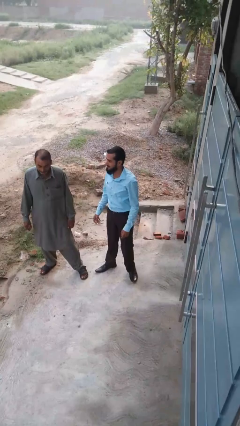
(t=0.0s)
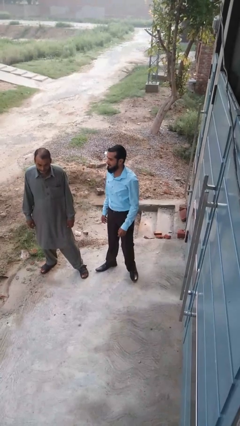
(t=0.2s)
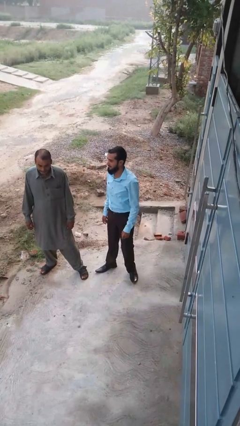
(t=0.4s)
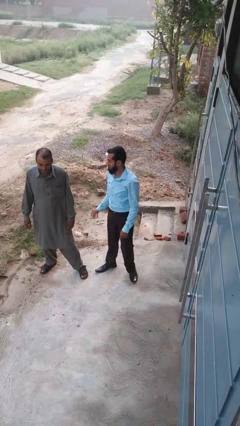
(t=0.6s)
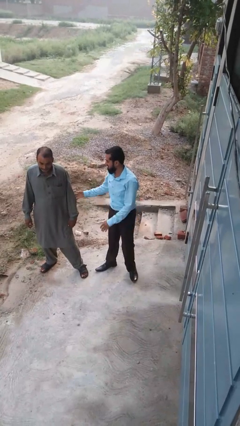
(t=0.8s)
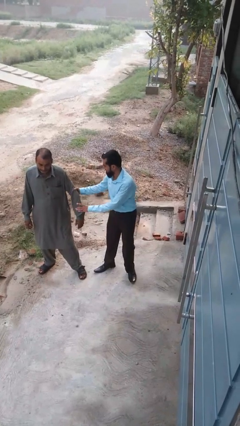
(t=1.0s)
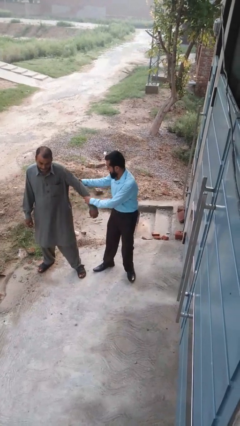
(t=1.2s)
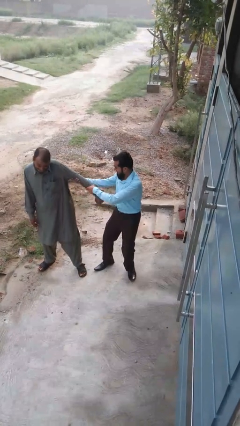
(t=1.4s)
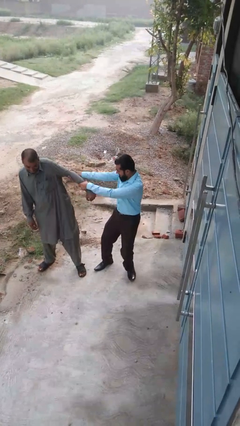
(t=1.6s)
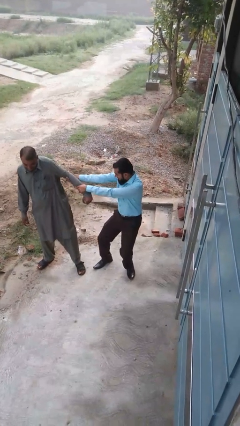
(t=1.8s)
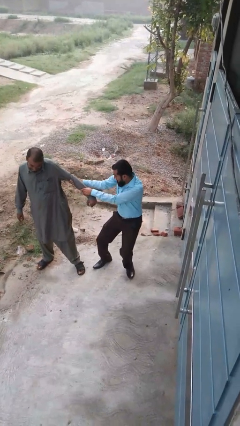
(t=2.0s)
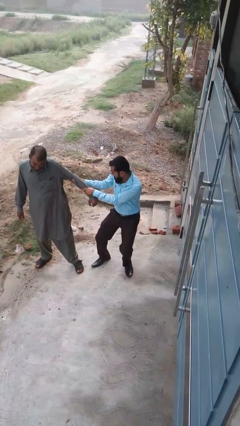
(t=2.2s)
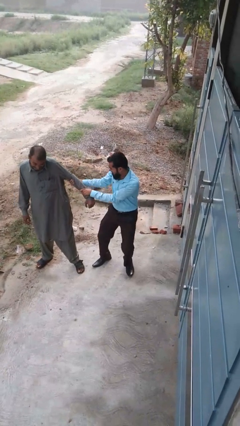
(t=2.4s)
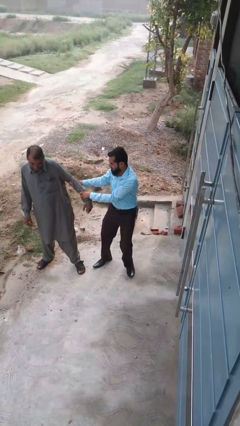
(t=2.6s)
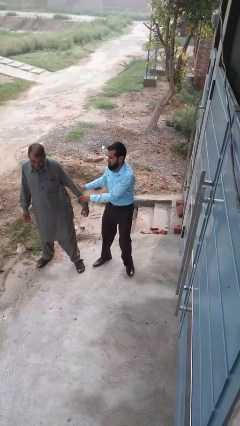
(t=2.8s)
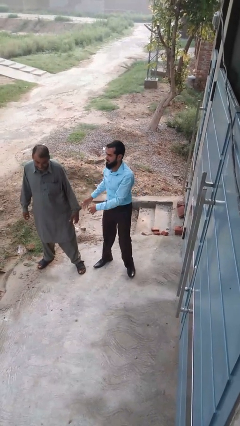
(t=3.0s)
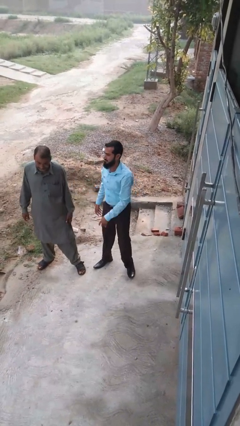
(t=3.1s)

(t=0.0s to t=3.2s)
person grabs person by forearm

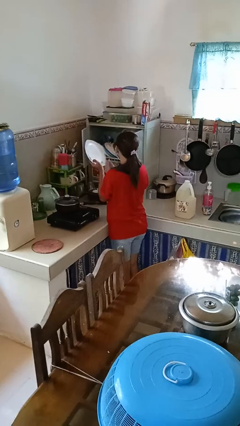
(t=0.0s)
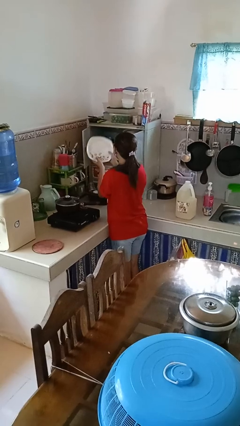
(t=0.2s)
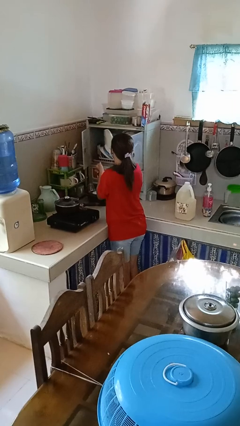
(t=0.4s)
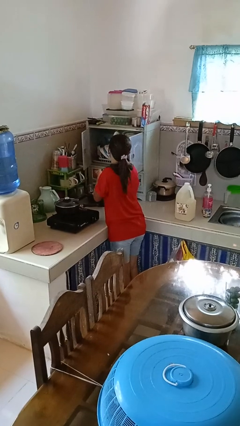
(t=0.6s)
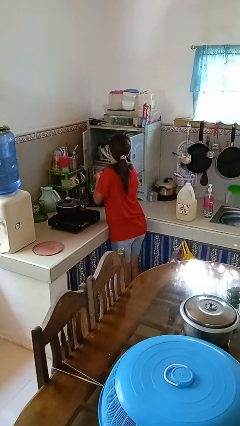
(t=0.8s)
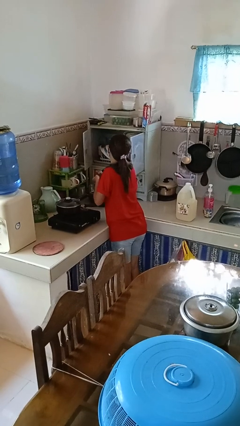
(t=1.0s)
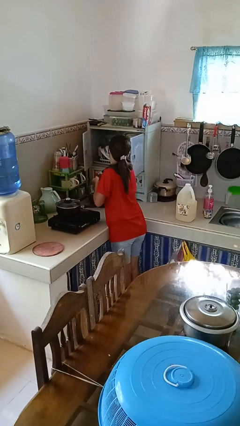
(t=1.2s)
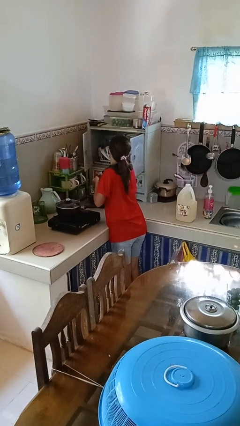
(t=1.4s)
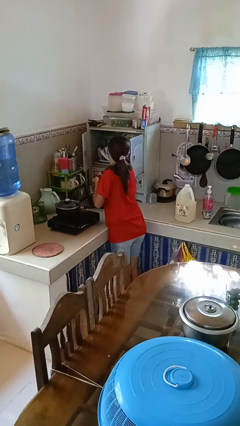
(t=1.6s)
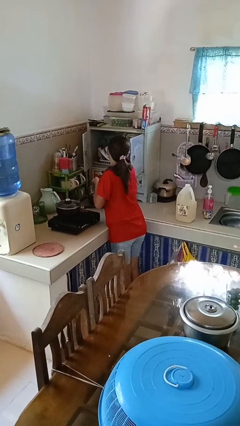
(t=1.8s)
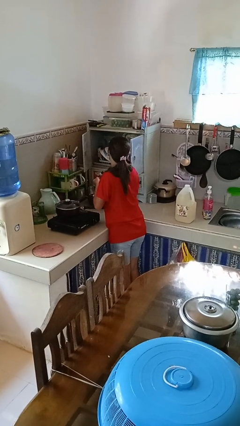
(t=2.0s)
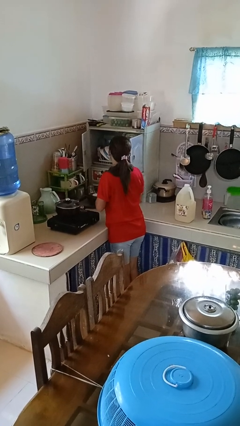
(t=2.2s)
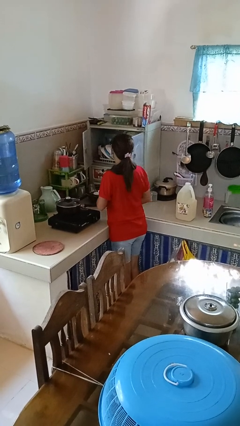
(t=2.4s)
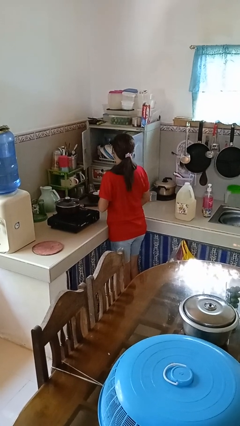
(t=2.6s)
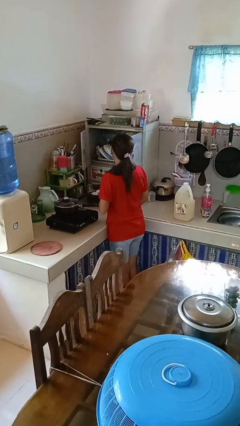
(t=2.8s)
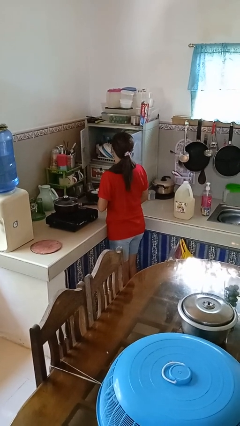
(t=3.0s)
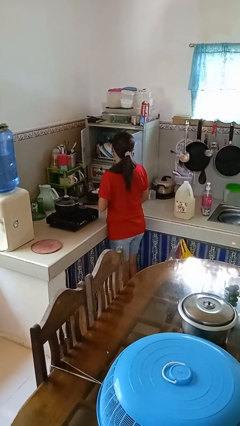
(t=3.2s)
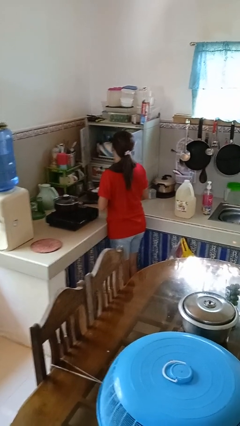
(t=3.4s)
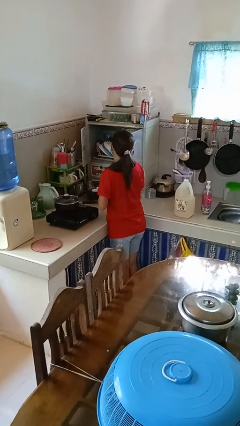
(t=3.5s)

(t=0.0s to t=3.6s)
person puts object in cabinet

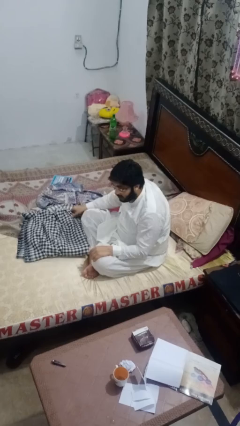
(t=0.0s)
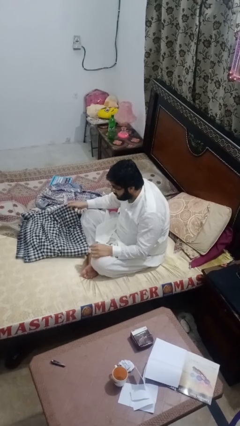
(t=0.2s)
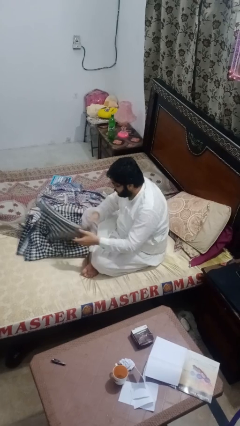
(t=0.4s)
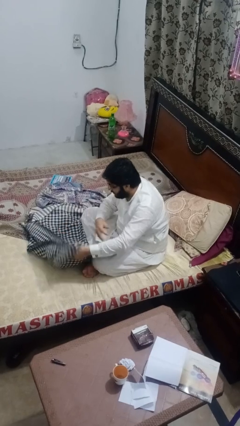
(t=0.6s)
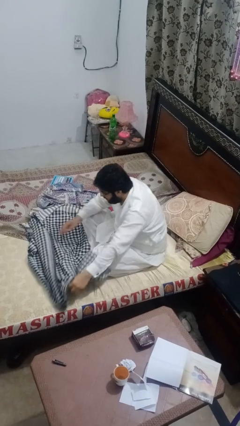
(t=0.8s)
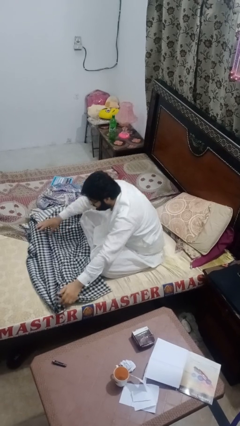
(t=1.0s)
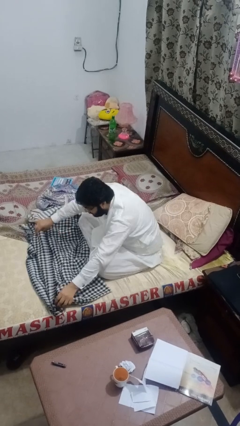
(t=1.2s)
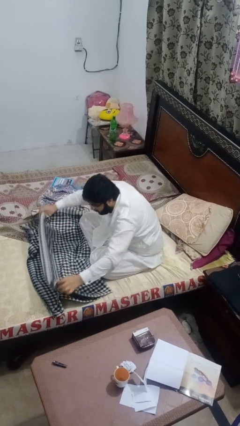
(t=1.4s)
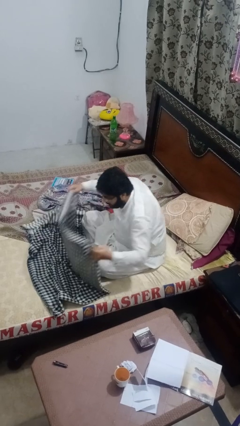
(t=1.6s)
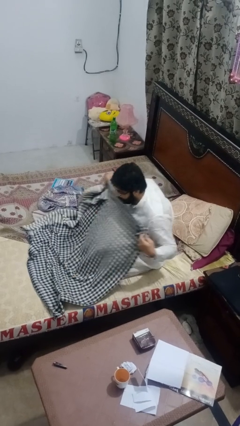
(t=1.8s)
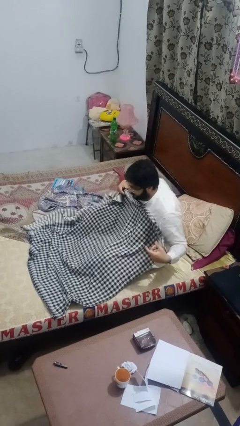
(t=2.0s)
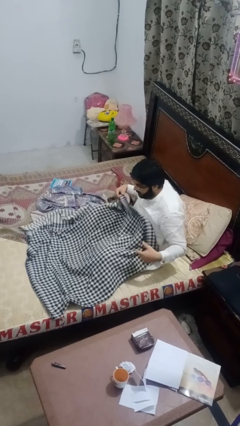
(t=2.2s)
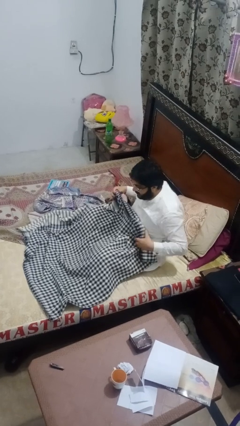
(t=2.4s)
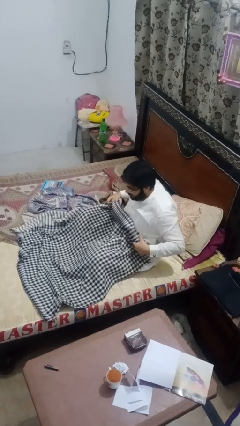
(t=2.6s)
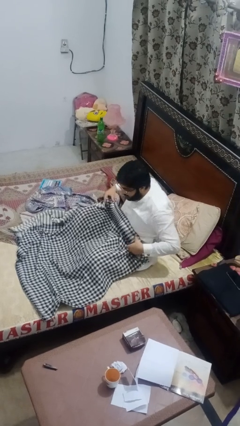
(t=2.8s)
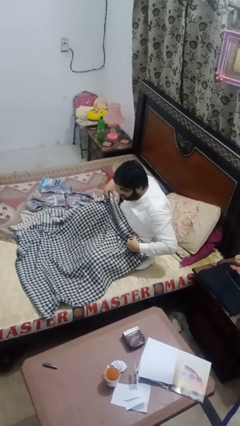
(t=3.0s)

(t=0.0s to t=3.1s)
person unfolds blanket

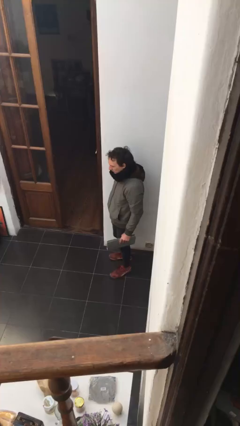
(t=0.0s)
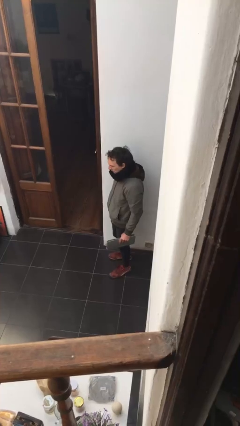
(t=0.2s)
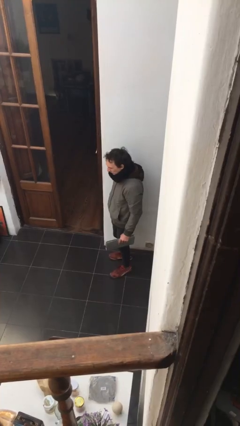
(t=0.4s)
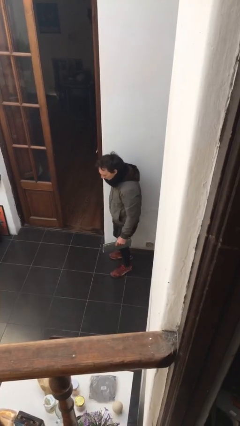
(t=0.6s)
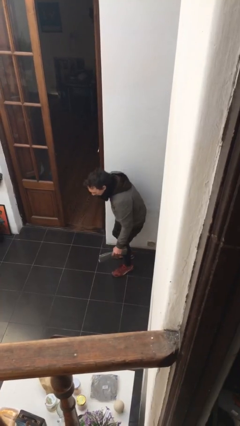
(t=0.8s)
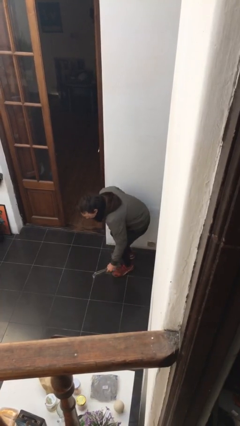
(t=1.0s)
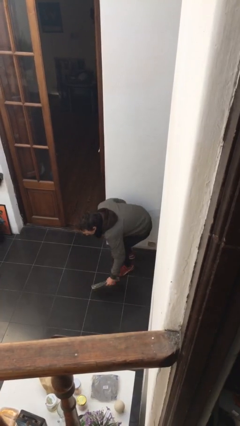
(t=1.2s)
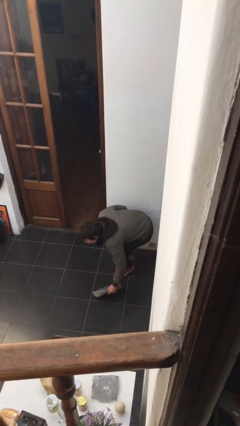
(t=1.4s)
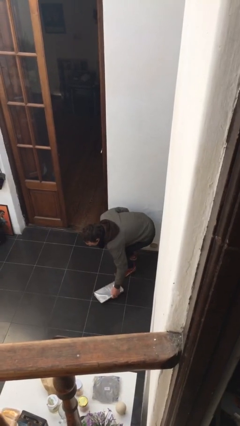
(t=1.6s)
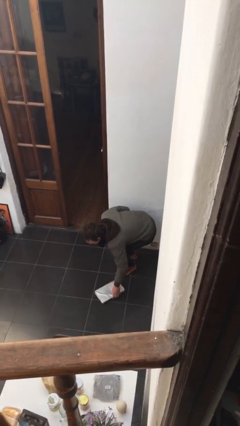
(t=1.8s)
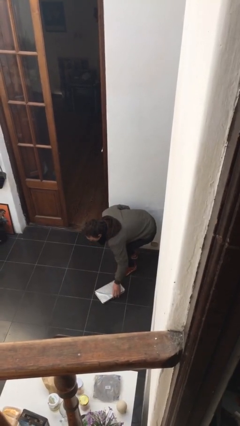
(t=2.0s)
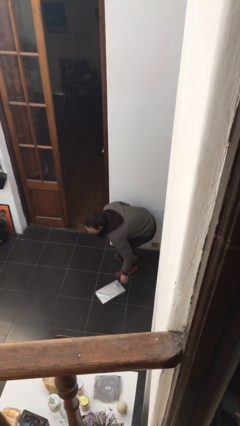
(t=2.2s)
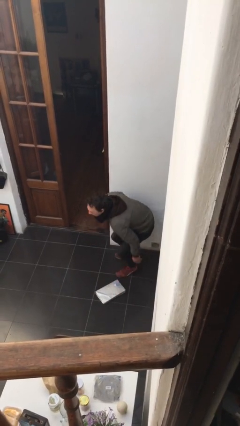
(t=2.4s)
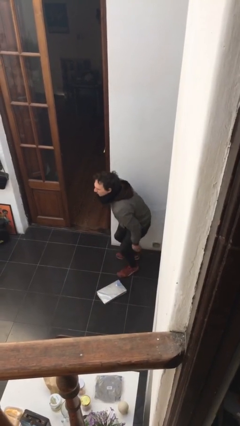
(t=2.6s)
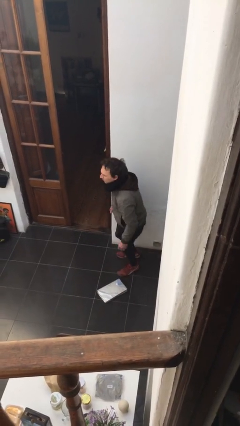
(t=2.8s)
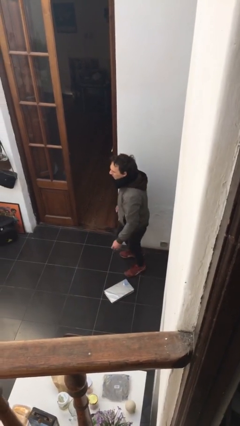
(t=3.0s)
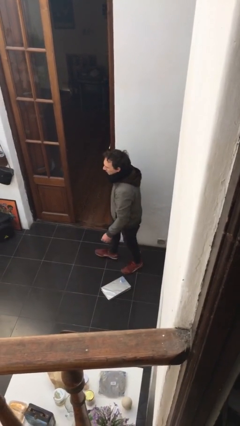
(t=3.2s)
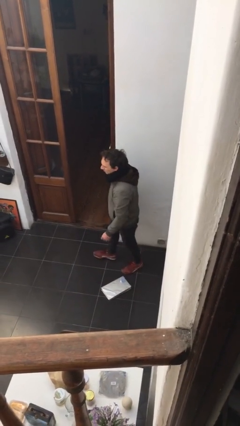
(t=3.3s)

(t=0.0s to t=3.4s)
person puts down object on floor

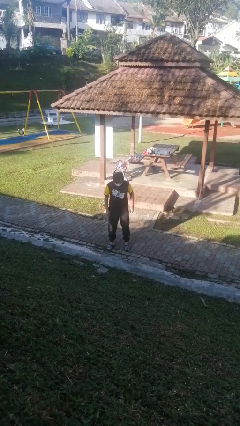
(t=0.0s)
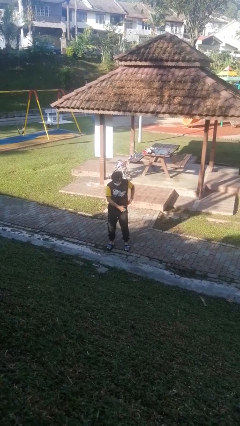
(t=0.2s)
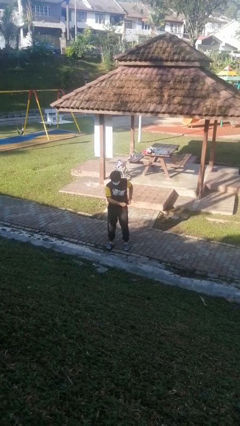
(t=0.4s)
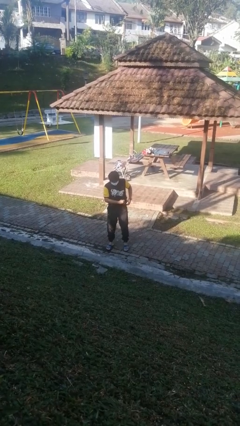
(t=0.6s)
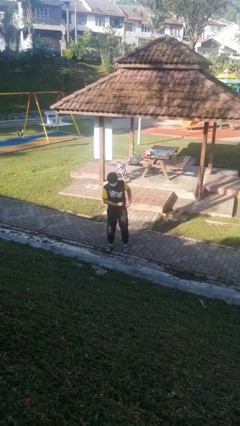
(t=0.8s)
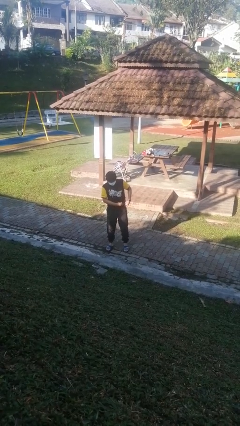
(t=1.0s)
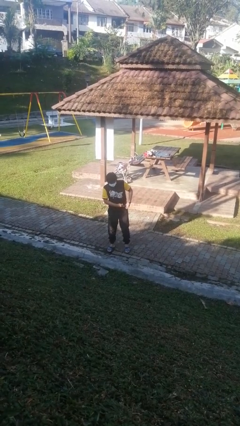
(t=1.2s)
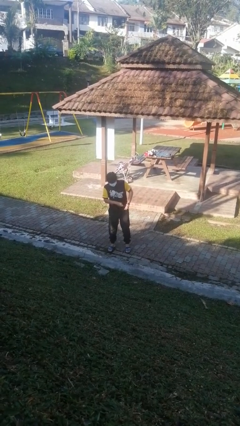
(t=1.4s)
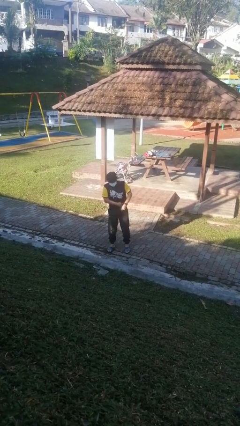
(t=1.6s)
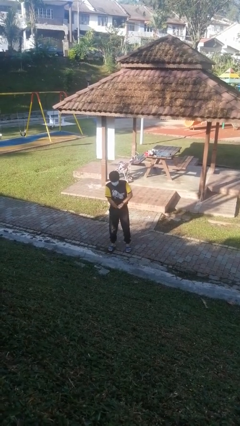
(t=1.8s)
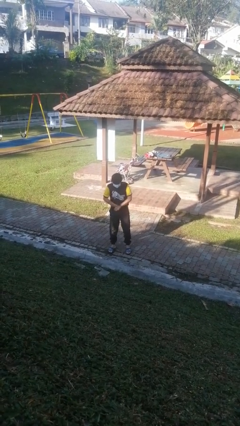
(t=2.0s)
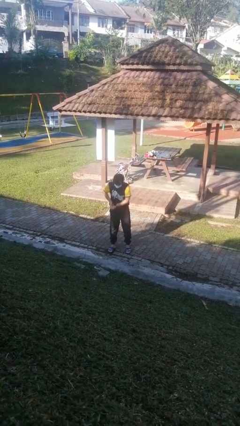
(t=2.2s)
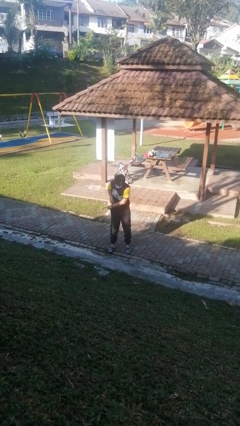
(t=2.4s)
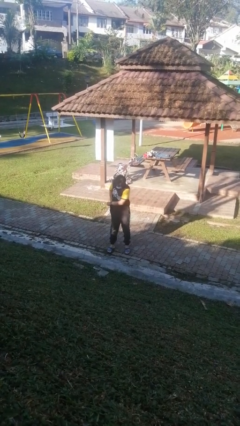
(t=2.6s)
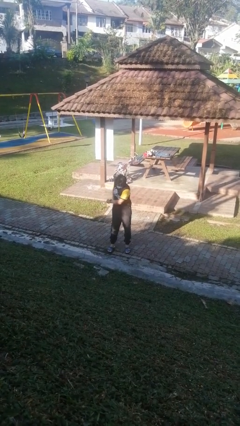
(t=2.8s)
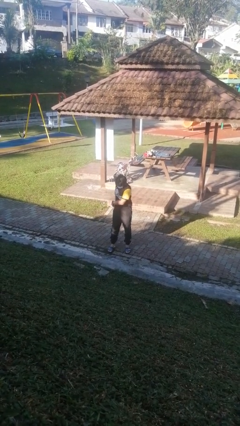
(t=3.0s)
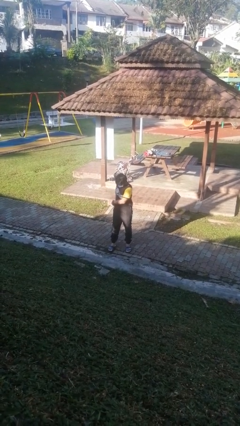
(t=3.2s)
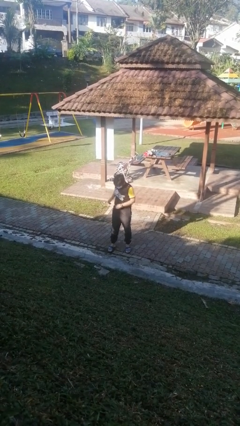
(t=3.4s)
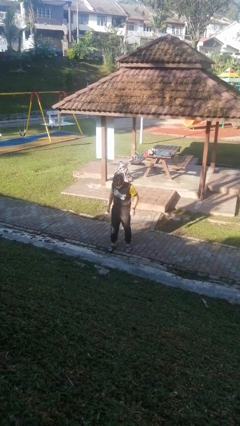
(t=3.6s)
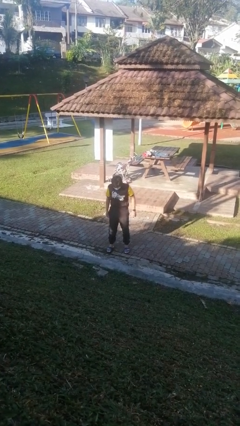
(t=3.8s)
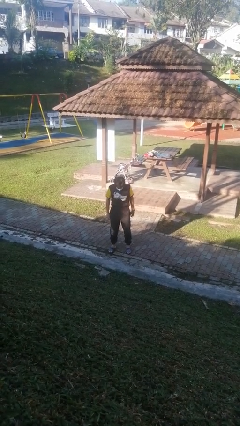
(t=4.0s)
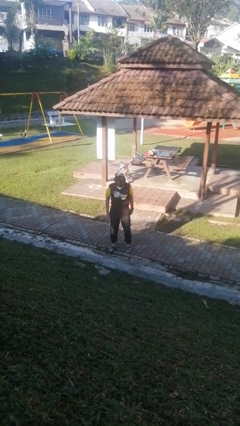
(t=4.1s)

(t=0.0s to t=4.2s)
person tucks in shirt
